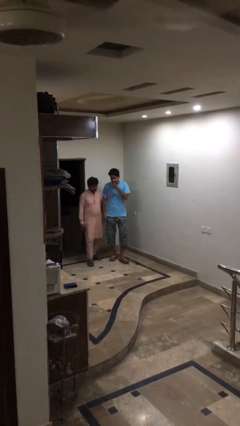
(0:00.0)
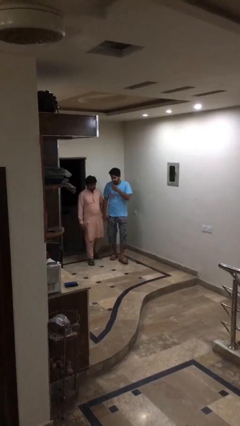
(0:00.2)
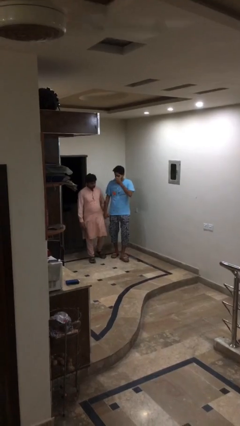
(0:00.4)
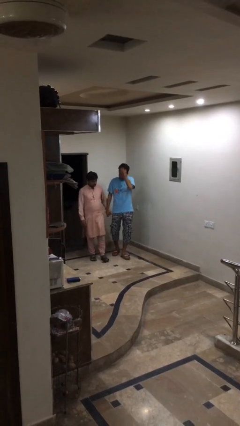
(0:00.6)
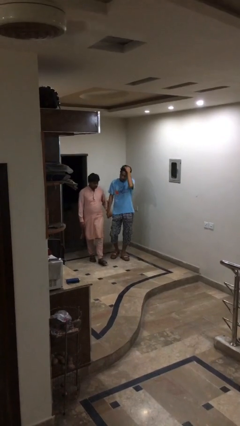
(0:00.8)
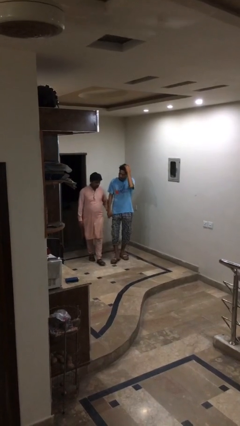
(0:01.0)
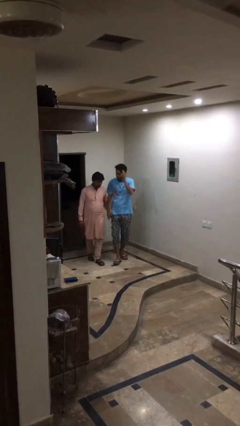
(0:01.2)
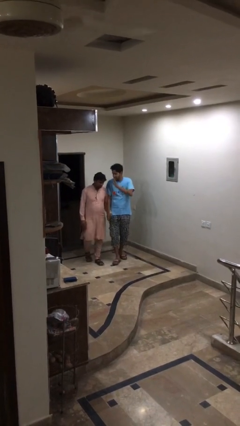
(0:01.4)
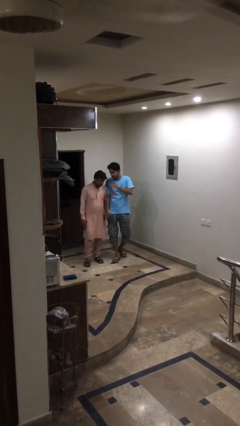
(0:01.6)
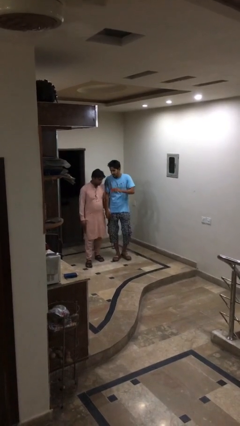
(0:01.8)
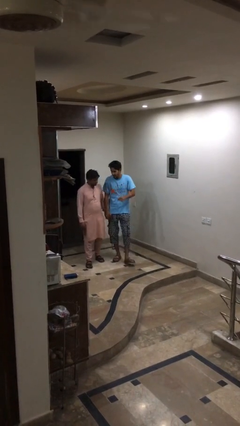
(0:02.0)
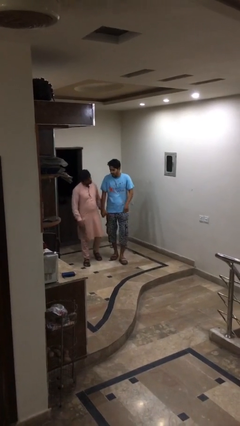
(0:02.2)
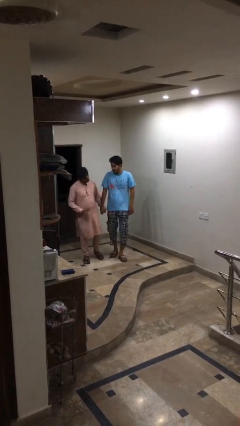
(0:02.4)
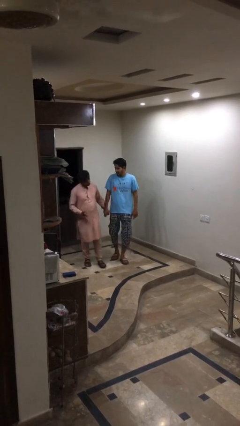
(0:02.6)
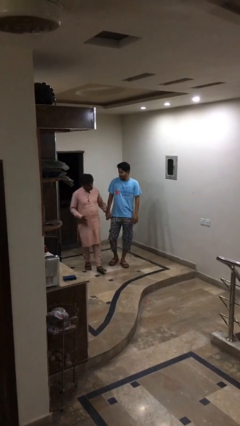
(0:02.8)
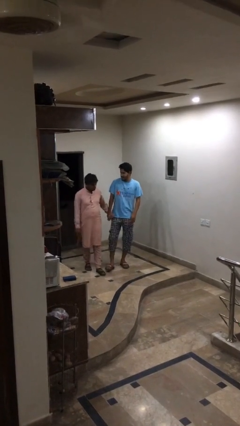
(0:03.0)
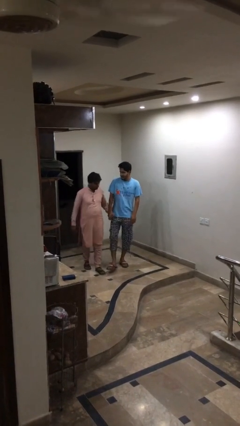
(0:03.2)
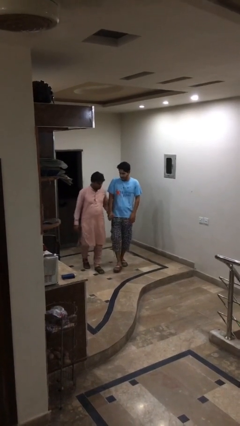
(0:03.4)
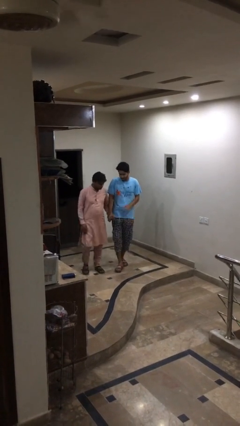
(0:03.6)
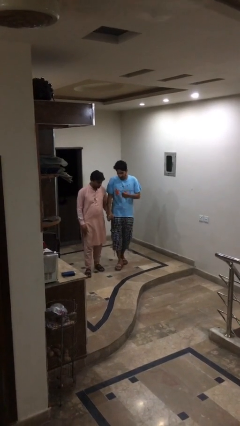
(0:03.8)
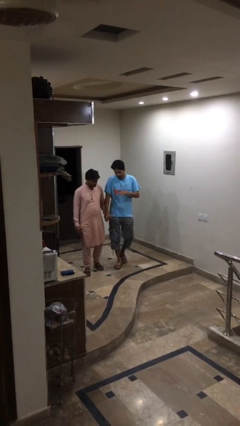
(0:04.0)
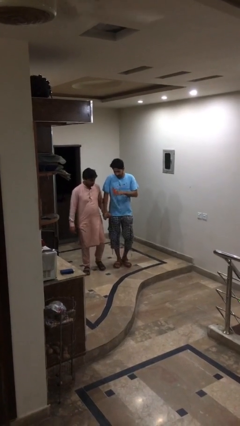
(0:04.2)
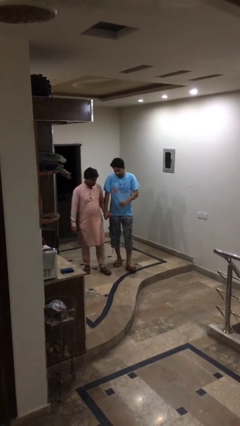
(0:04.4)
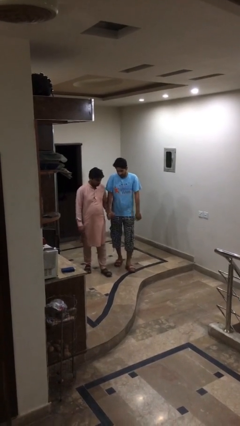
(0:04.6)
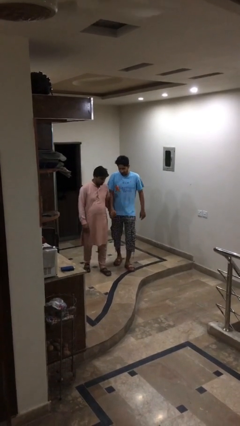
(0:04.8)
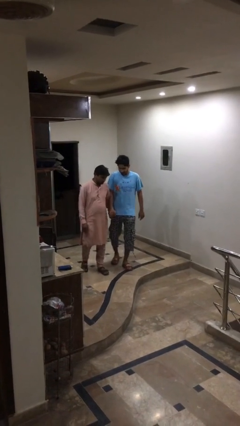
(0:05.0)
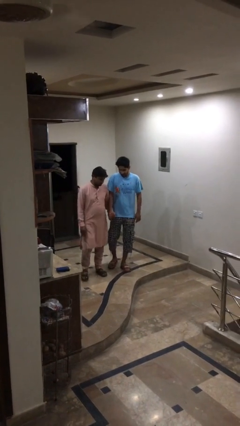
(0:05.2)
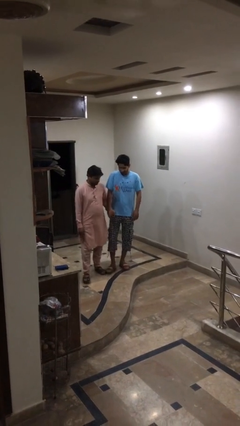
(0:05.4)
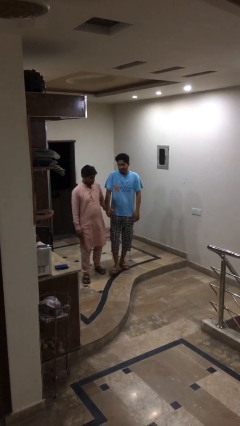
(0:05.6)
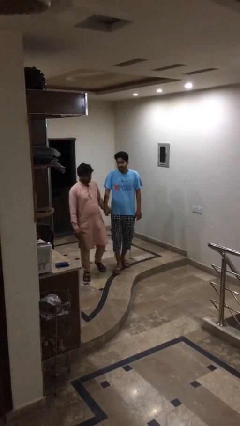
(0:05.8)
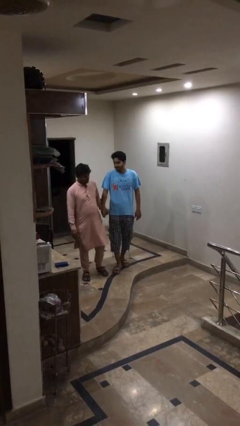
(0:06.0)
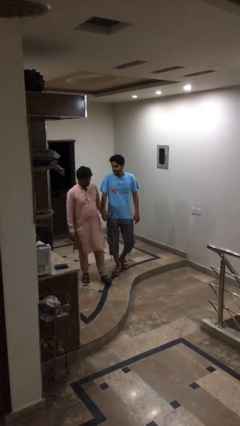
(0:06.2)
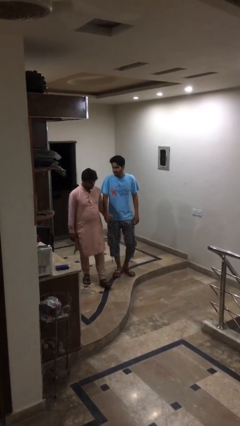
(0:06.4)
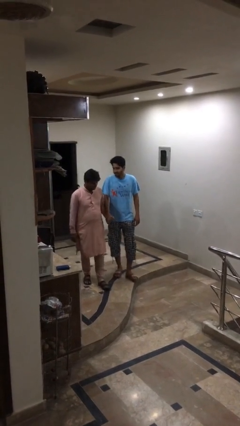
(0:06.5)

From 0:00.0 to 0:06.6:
person holds hand

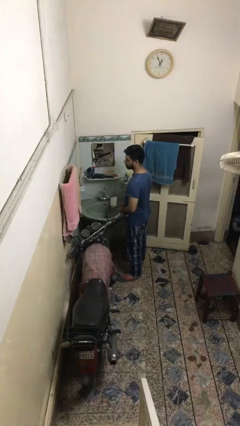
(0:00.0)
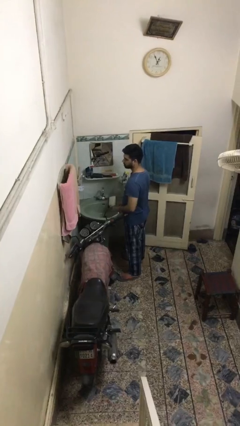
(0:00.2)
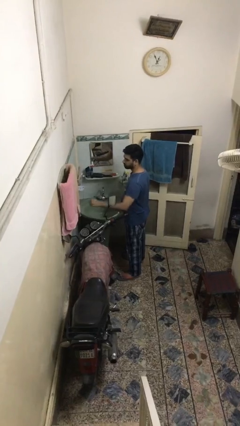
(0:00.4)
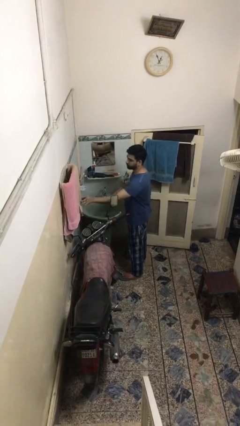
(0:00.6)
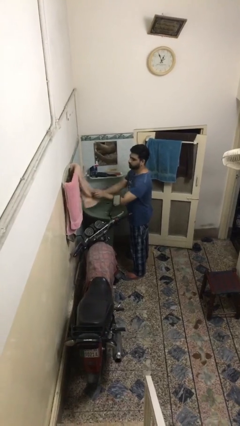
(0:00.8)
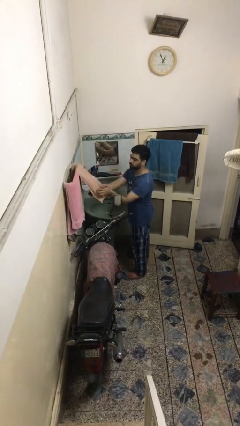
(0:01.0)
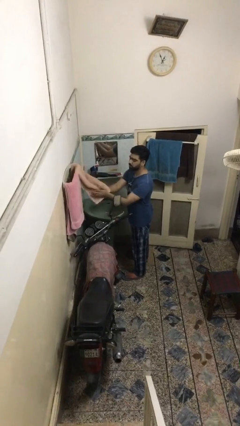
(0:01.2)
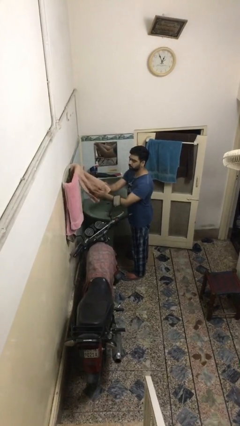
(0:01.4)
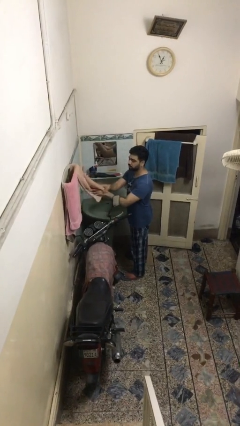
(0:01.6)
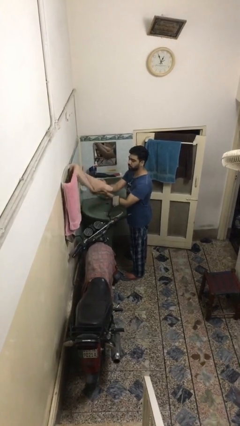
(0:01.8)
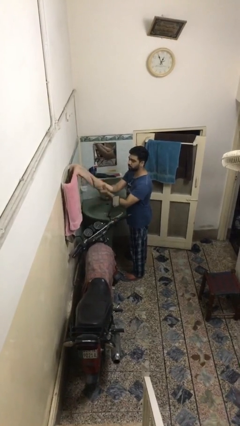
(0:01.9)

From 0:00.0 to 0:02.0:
person dries hands with towel

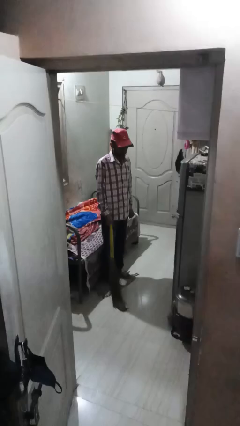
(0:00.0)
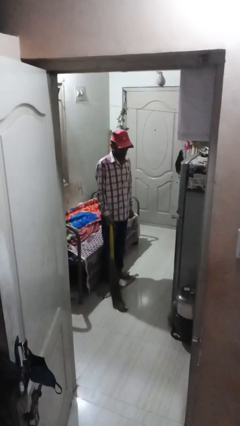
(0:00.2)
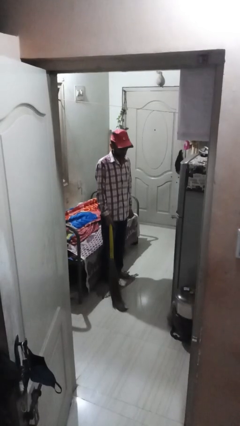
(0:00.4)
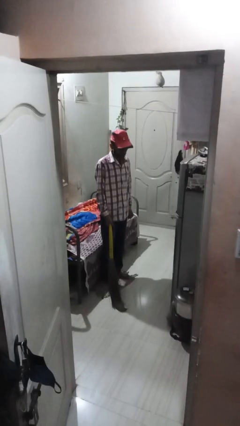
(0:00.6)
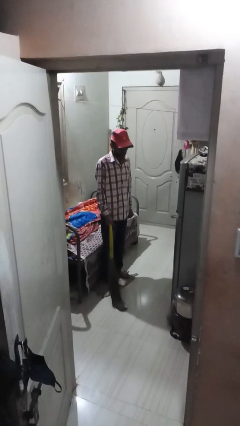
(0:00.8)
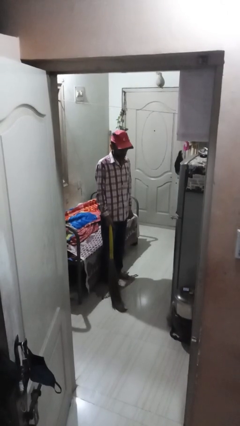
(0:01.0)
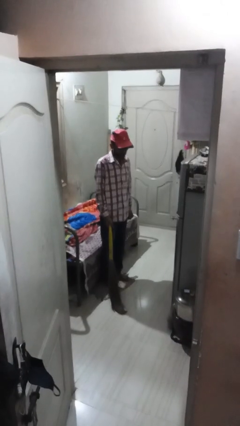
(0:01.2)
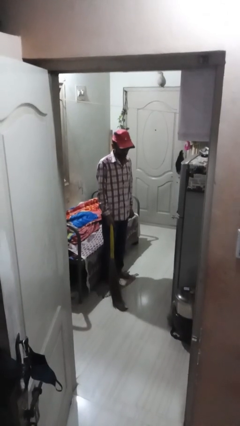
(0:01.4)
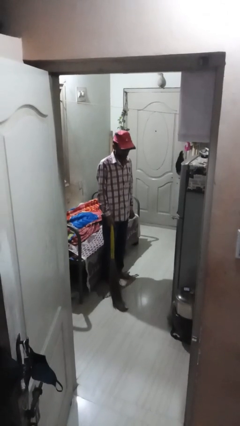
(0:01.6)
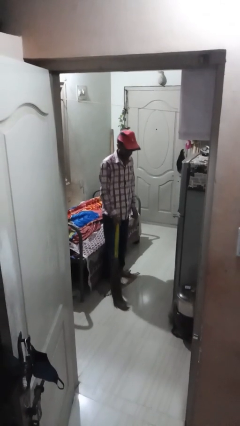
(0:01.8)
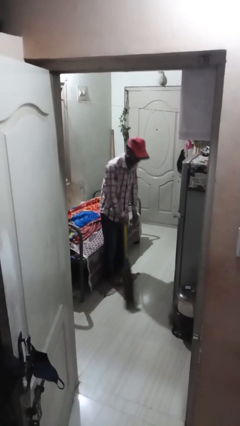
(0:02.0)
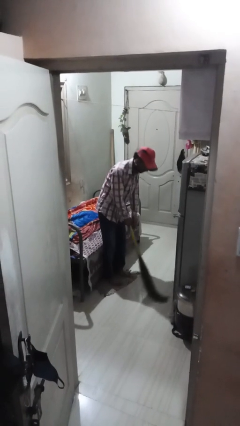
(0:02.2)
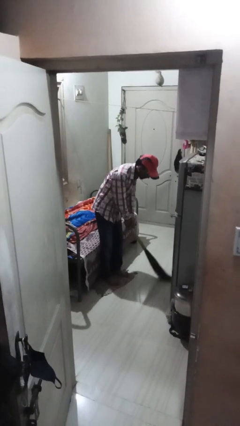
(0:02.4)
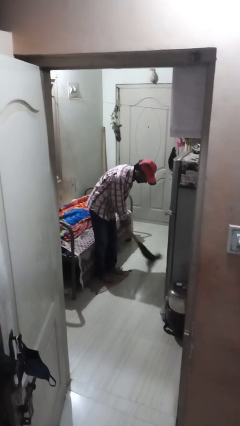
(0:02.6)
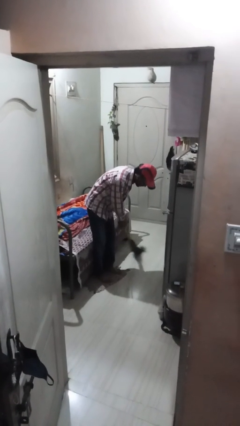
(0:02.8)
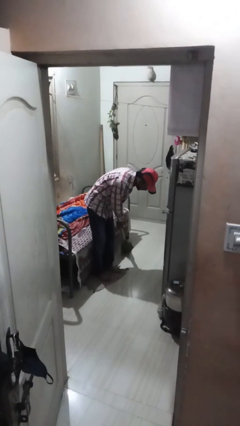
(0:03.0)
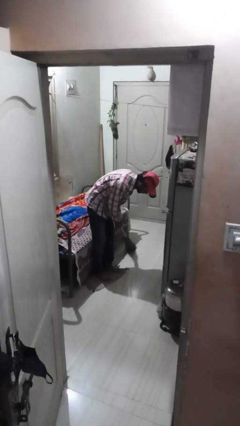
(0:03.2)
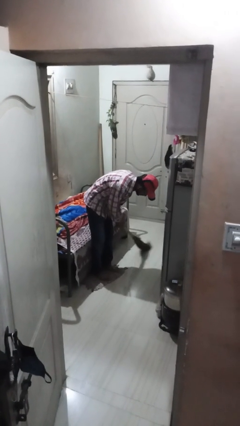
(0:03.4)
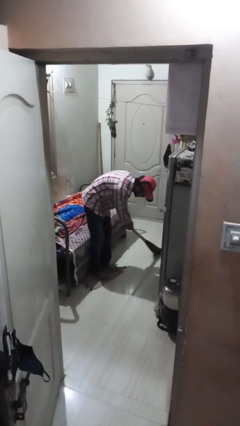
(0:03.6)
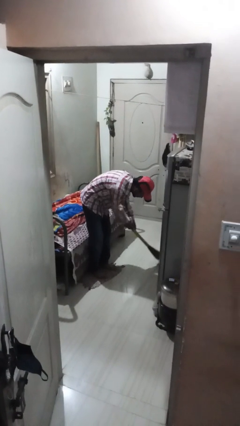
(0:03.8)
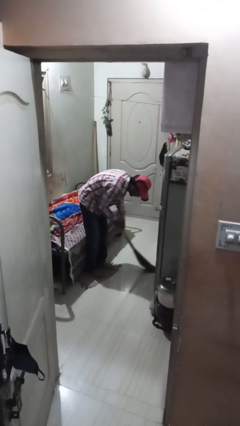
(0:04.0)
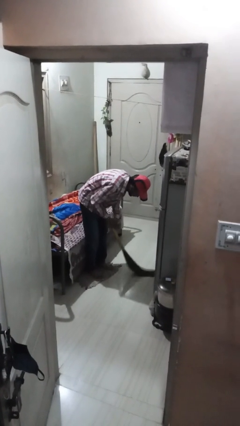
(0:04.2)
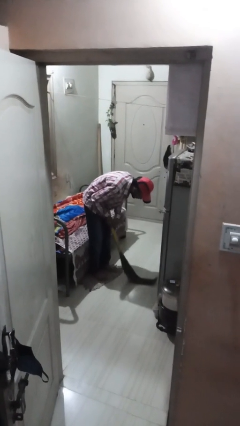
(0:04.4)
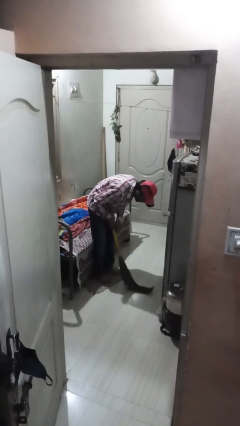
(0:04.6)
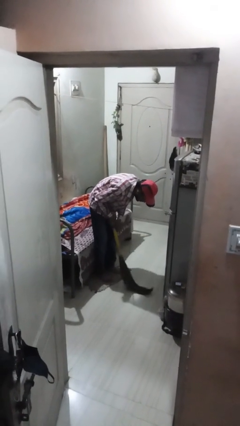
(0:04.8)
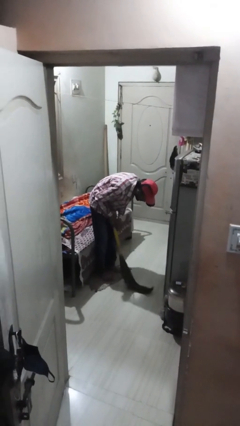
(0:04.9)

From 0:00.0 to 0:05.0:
person sweeps floor

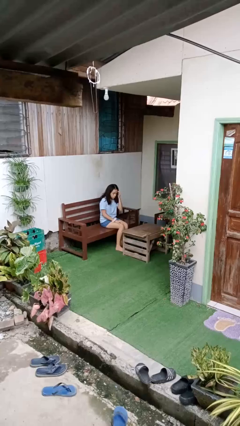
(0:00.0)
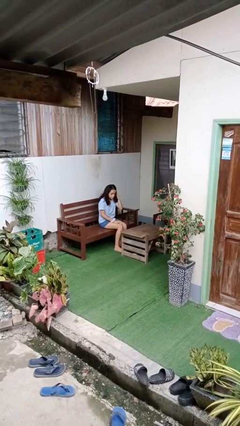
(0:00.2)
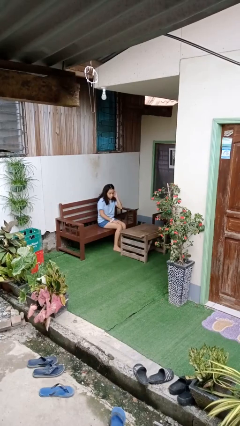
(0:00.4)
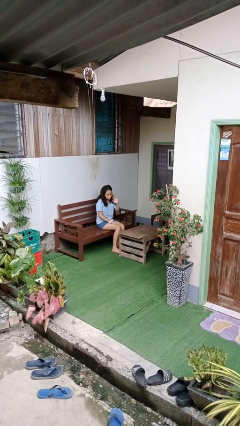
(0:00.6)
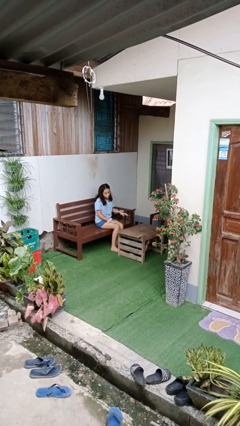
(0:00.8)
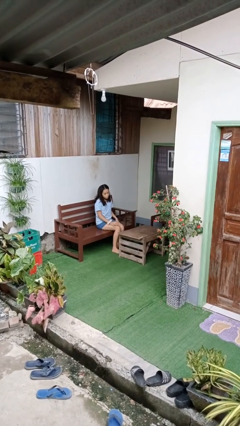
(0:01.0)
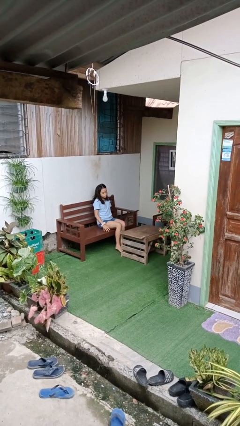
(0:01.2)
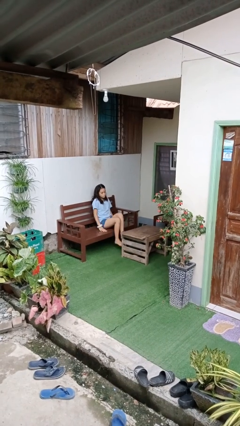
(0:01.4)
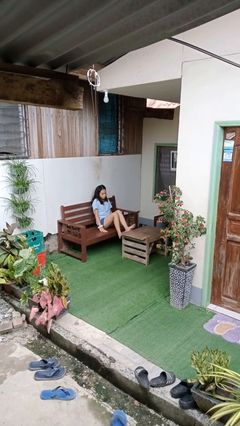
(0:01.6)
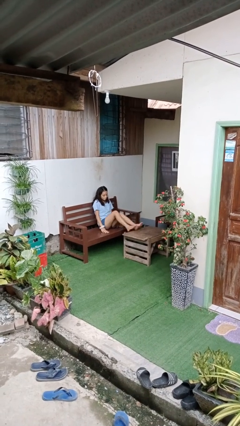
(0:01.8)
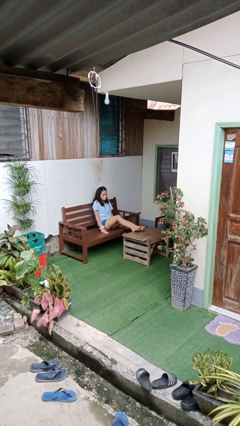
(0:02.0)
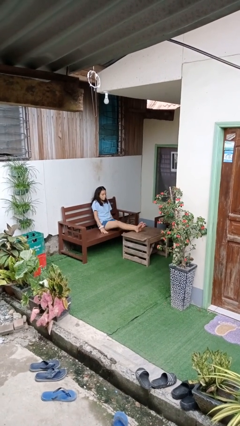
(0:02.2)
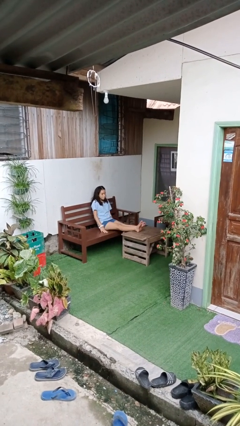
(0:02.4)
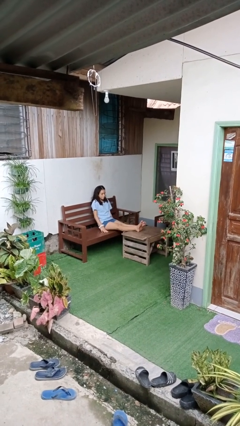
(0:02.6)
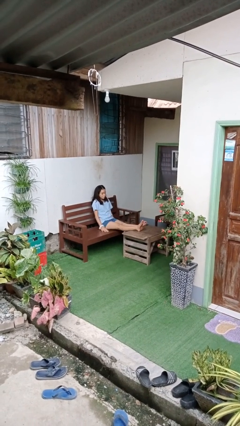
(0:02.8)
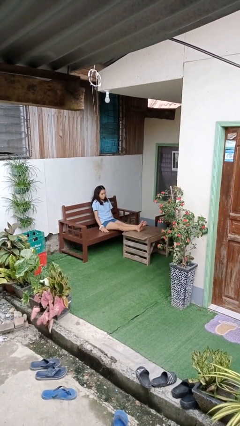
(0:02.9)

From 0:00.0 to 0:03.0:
person puts feet up

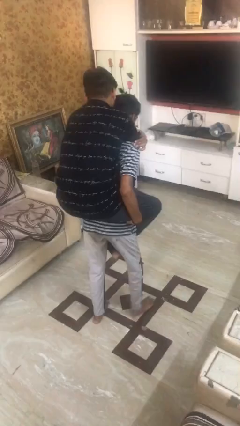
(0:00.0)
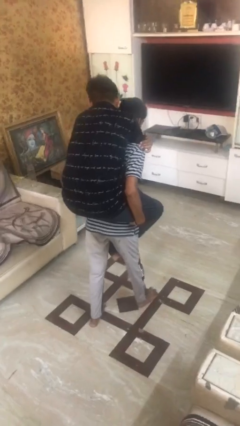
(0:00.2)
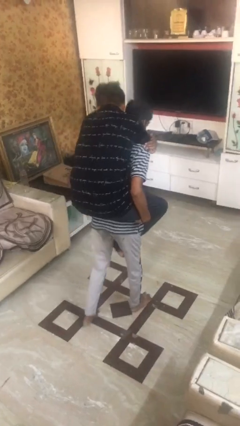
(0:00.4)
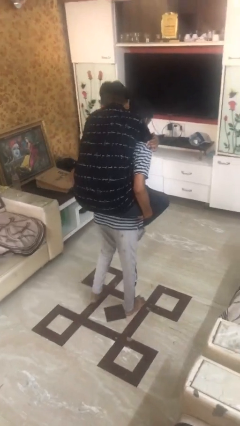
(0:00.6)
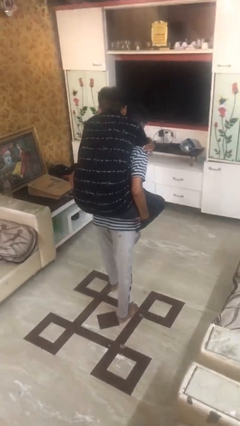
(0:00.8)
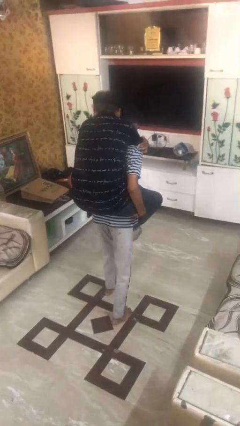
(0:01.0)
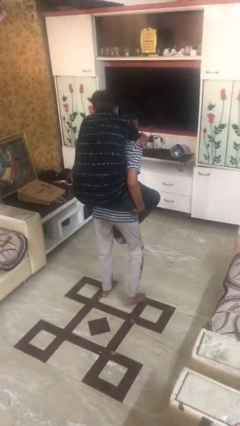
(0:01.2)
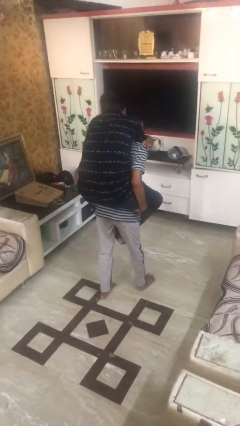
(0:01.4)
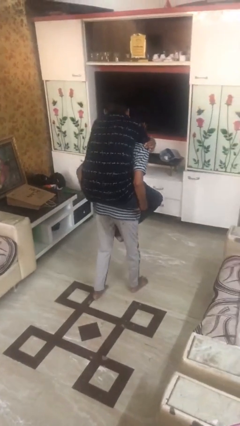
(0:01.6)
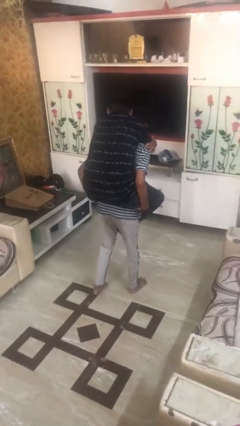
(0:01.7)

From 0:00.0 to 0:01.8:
person carries person on back
